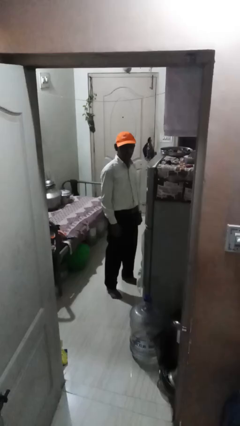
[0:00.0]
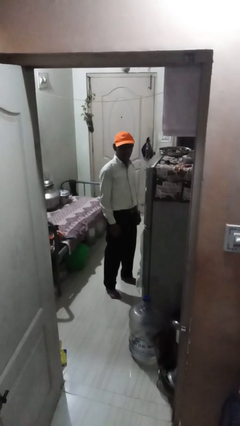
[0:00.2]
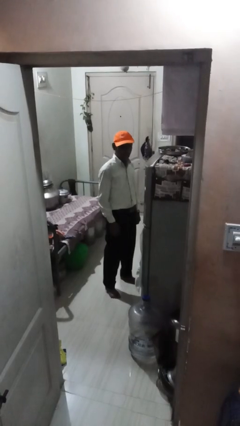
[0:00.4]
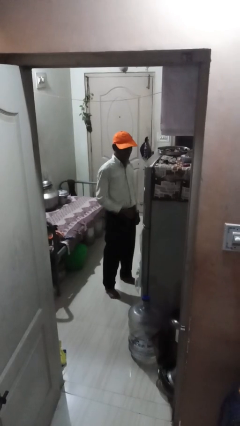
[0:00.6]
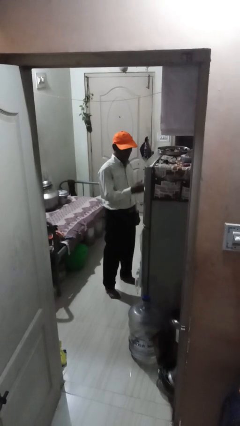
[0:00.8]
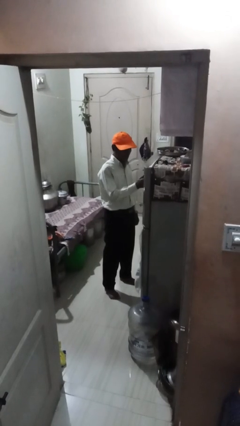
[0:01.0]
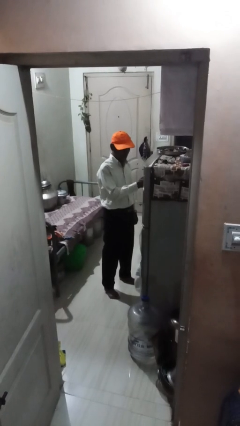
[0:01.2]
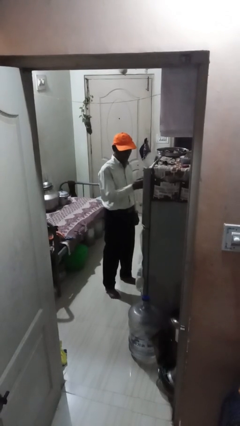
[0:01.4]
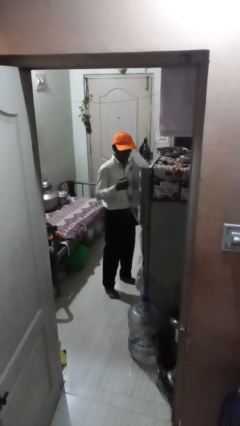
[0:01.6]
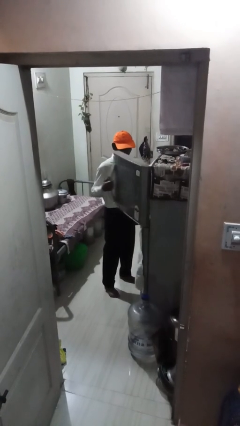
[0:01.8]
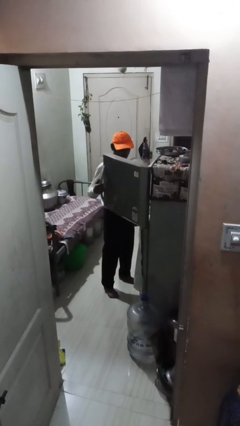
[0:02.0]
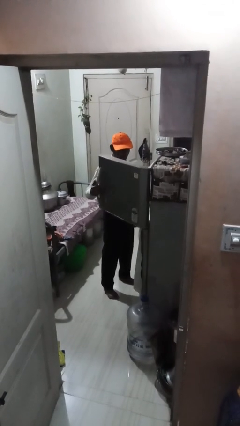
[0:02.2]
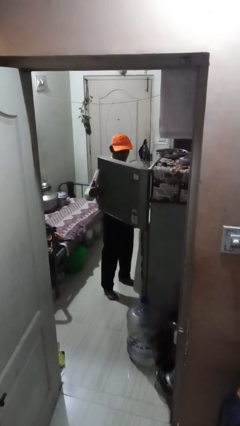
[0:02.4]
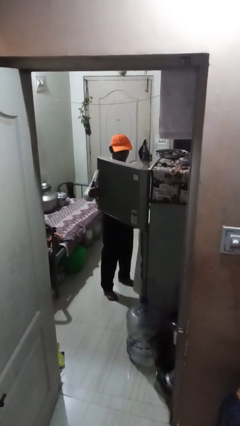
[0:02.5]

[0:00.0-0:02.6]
person opens clothes washer

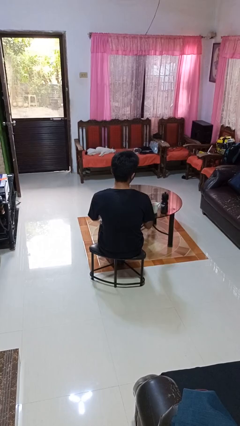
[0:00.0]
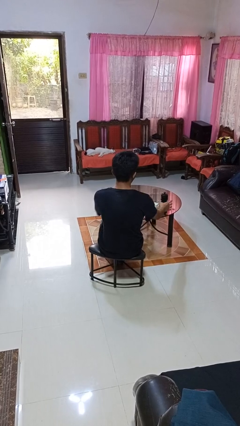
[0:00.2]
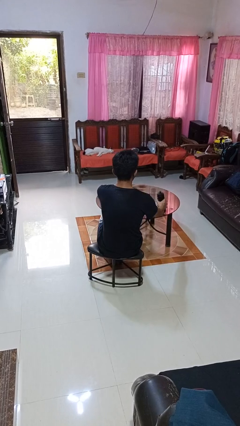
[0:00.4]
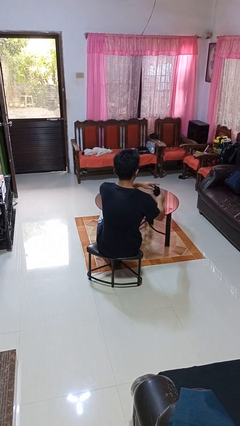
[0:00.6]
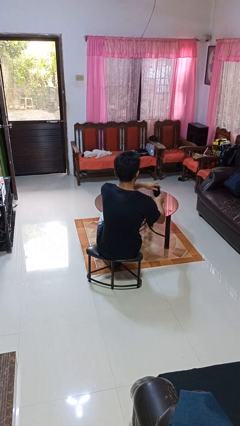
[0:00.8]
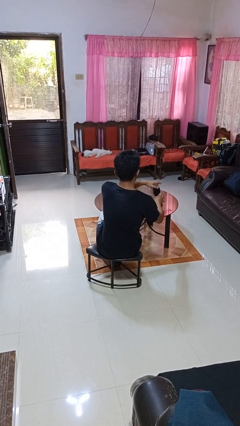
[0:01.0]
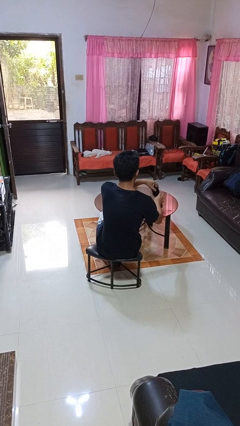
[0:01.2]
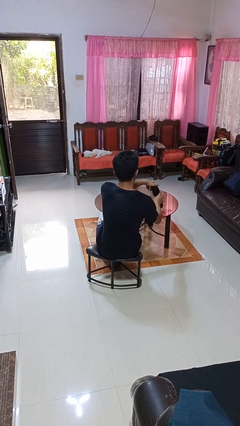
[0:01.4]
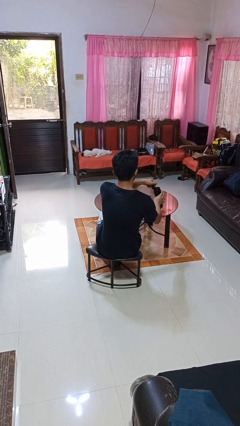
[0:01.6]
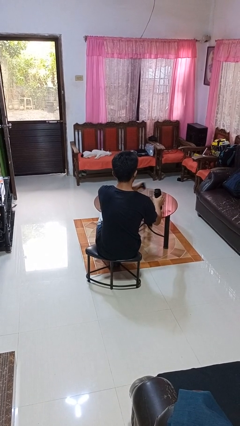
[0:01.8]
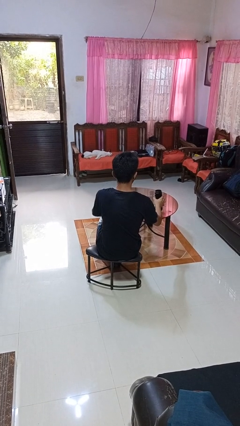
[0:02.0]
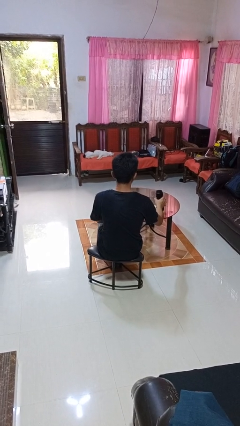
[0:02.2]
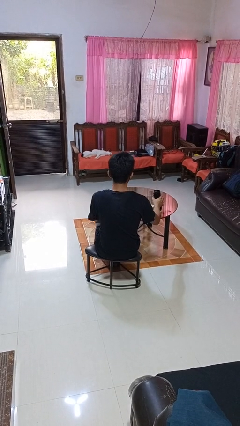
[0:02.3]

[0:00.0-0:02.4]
person unscrews lid from bottle

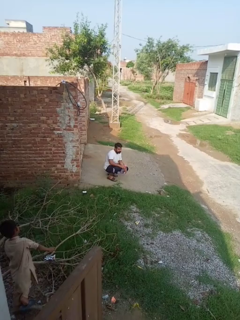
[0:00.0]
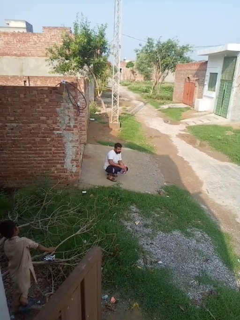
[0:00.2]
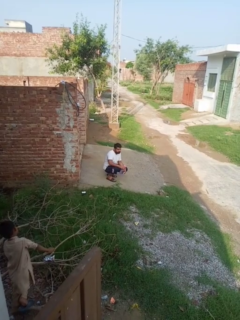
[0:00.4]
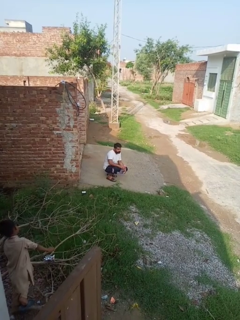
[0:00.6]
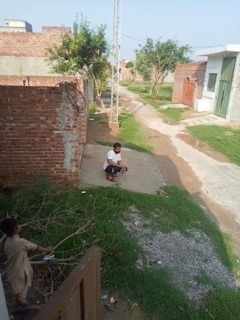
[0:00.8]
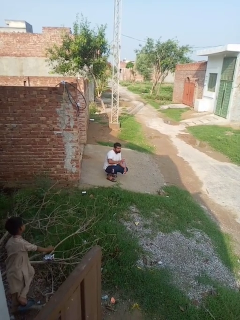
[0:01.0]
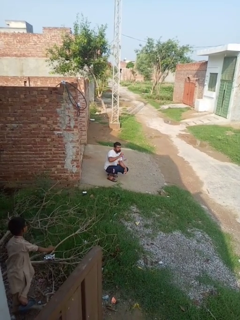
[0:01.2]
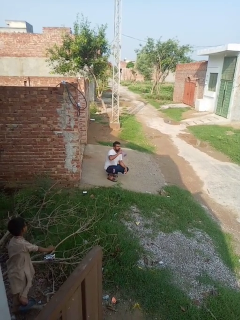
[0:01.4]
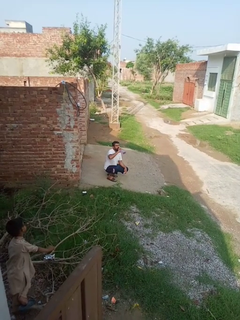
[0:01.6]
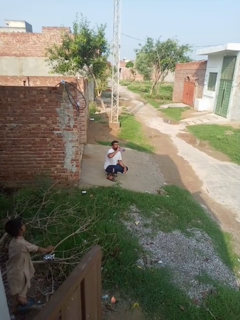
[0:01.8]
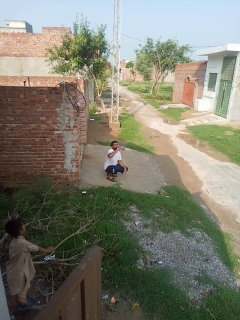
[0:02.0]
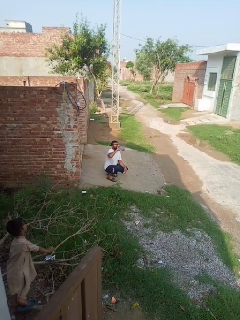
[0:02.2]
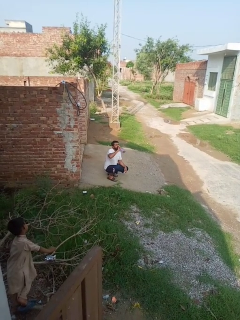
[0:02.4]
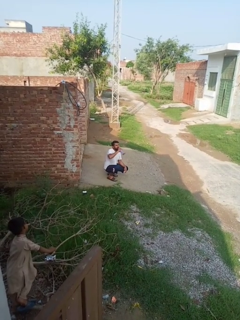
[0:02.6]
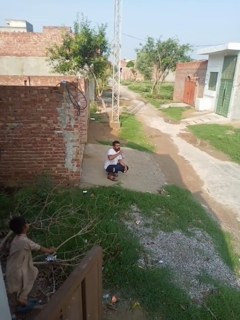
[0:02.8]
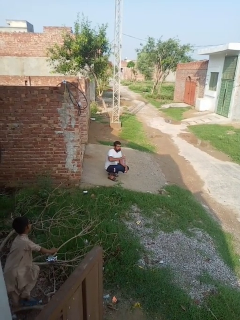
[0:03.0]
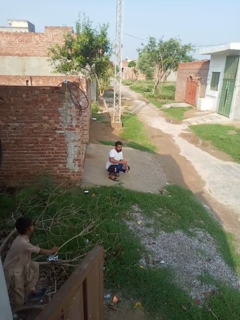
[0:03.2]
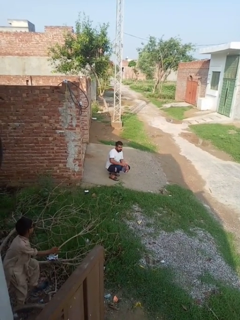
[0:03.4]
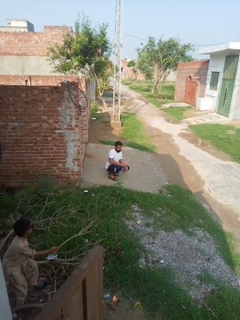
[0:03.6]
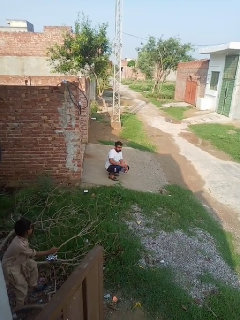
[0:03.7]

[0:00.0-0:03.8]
person drinks from bottle

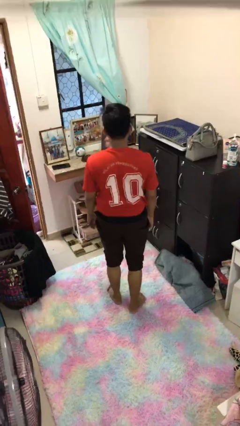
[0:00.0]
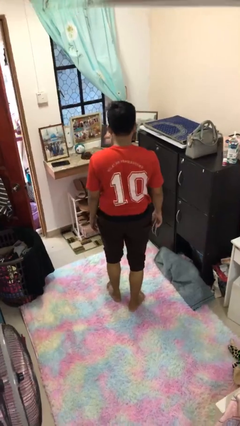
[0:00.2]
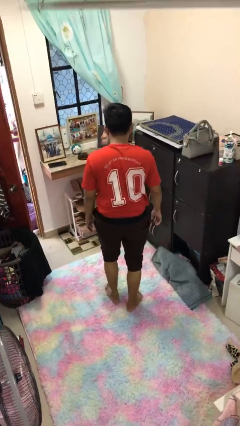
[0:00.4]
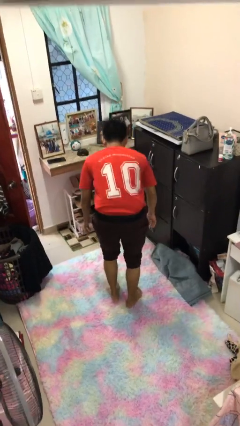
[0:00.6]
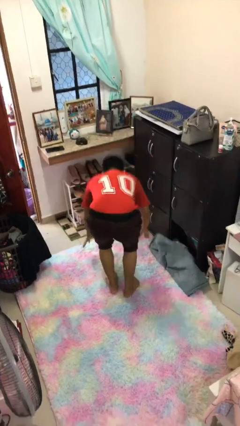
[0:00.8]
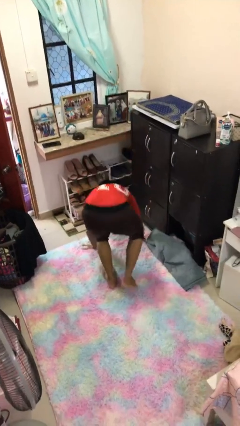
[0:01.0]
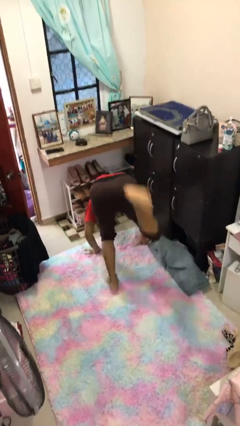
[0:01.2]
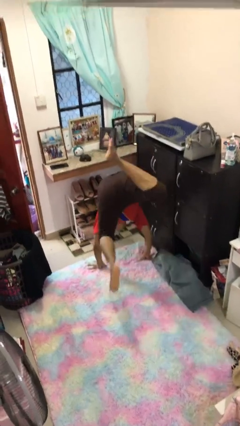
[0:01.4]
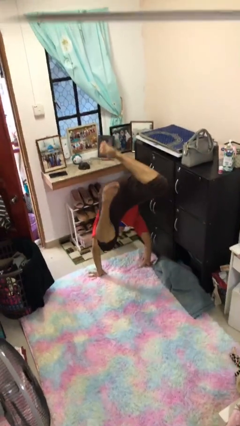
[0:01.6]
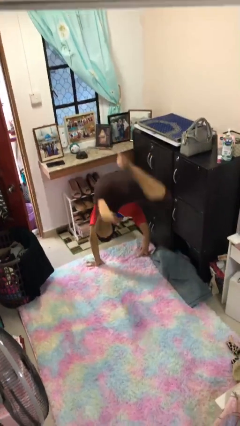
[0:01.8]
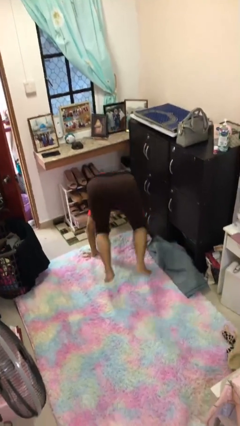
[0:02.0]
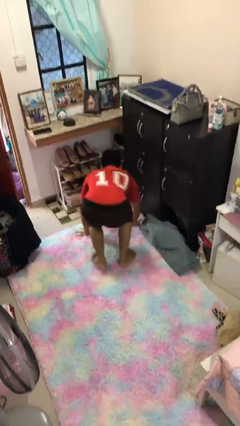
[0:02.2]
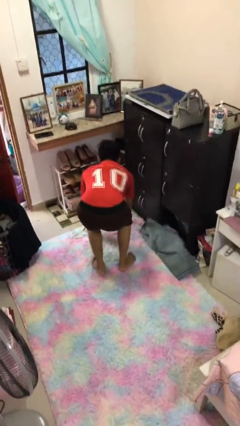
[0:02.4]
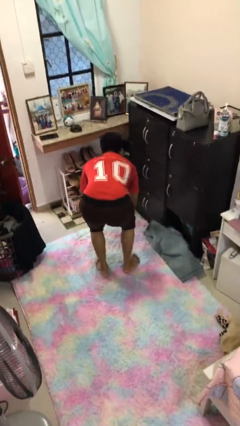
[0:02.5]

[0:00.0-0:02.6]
person handstand

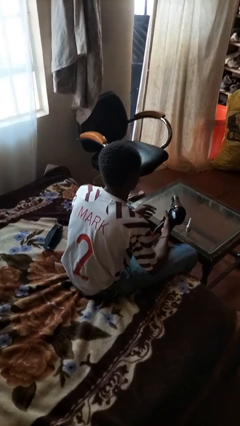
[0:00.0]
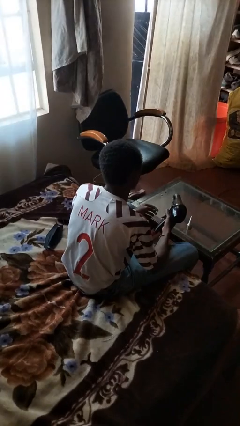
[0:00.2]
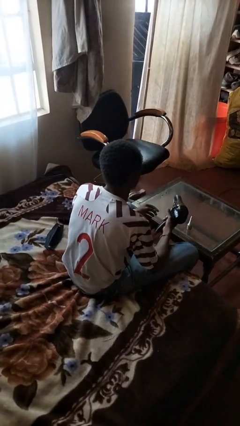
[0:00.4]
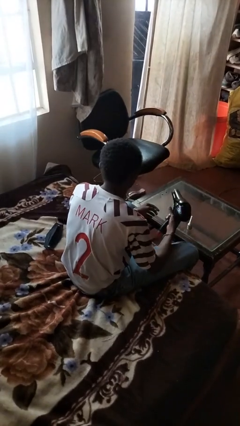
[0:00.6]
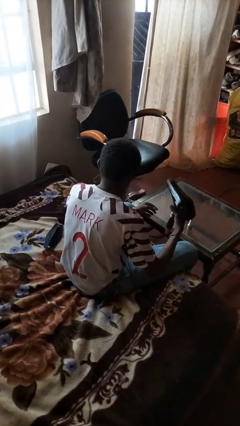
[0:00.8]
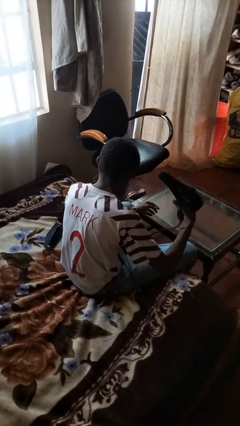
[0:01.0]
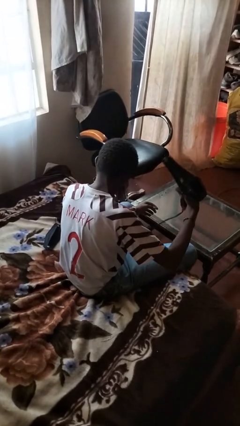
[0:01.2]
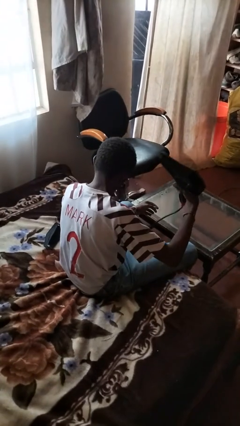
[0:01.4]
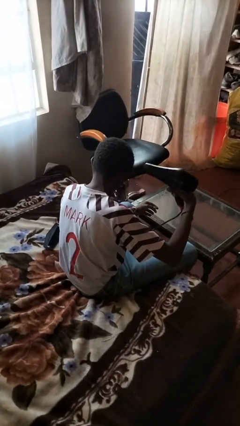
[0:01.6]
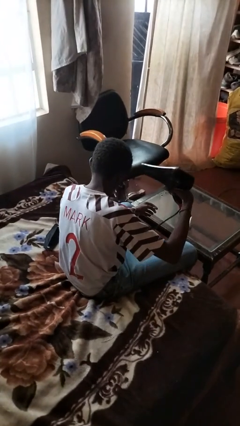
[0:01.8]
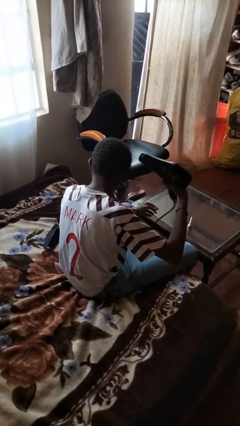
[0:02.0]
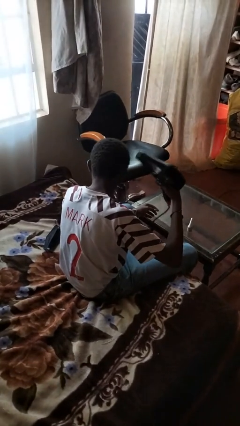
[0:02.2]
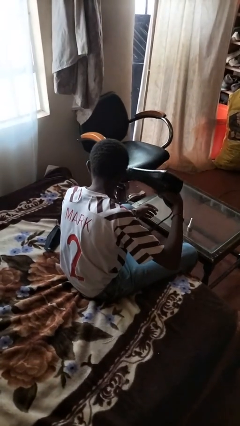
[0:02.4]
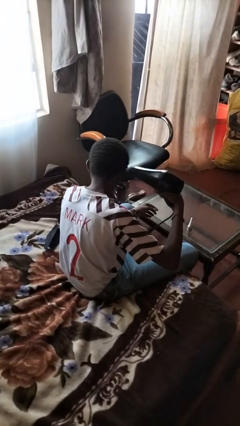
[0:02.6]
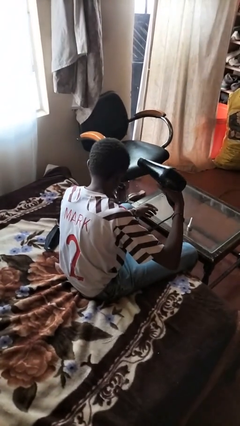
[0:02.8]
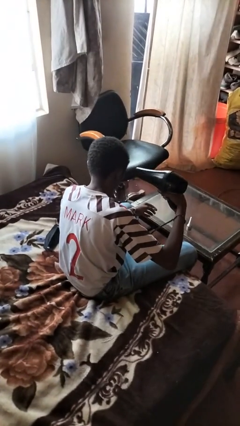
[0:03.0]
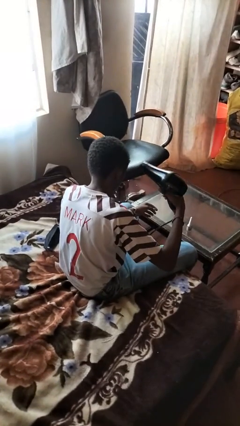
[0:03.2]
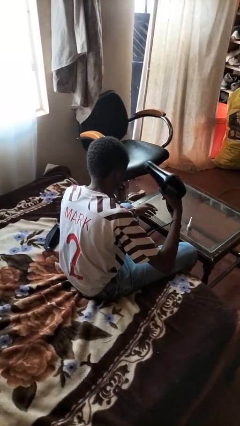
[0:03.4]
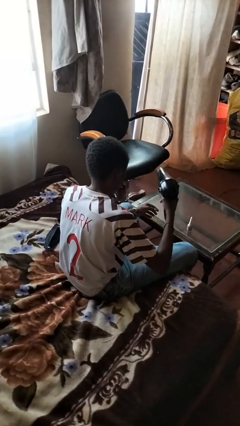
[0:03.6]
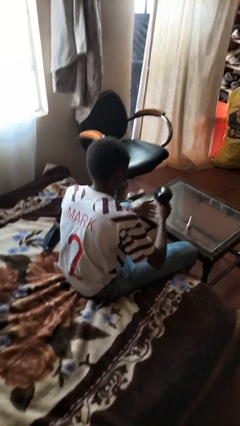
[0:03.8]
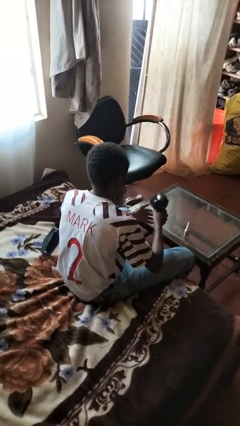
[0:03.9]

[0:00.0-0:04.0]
person dries hair with hairdryer

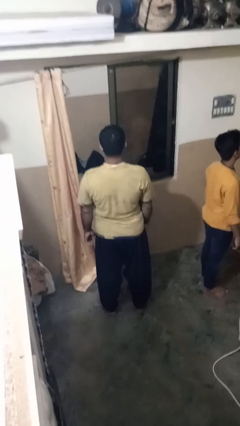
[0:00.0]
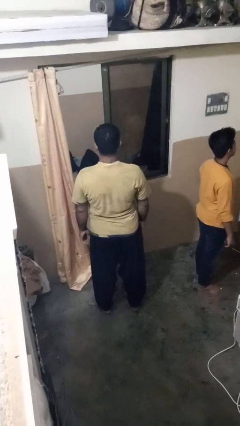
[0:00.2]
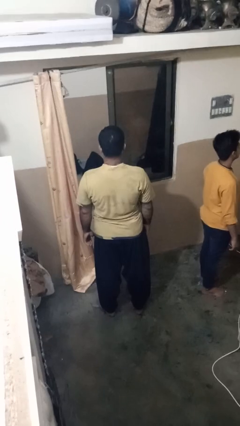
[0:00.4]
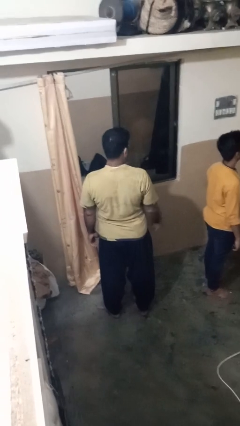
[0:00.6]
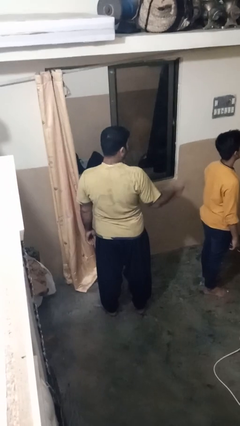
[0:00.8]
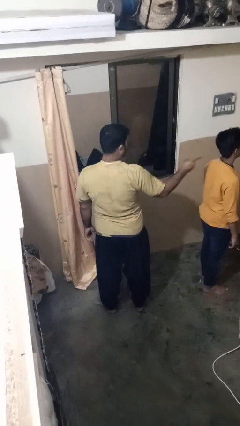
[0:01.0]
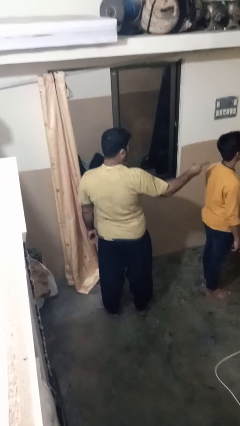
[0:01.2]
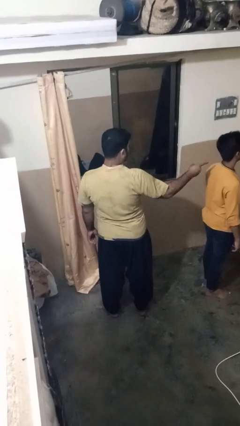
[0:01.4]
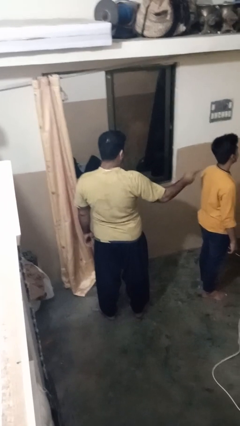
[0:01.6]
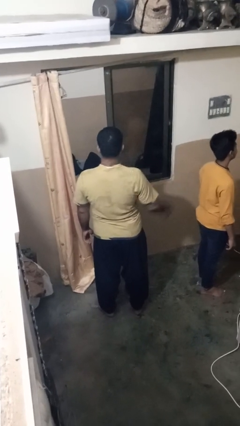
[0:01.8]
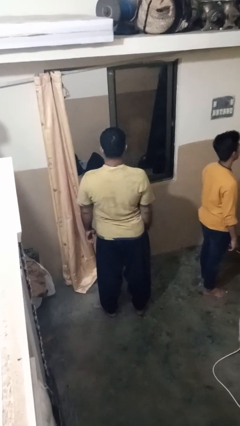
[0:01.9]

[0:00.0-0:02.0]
person points at person

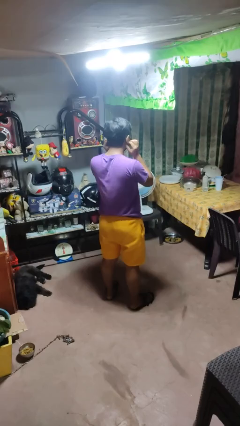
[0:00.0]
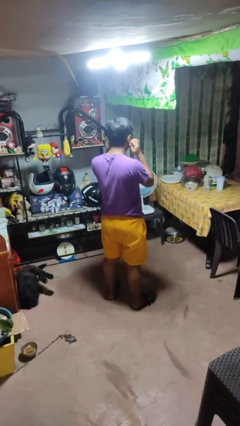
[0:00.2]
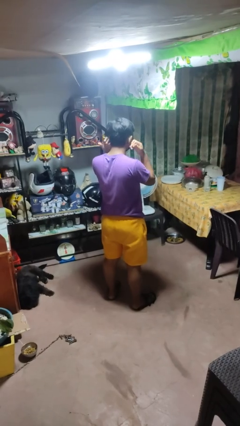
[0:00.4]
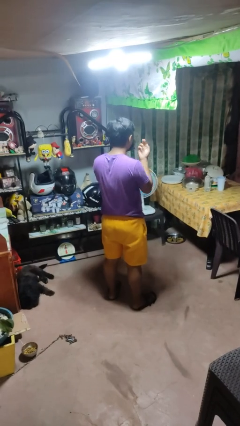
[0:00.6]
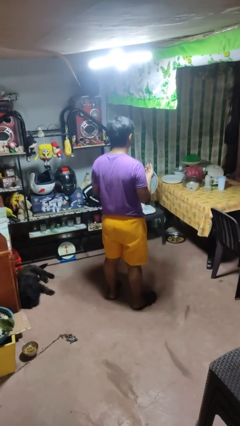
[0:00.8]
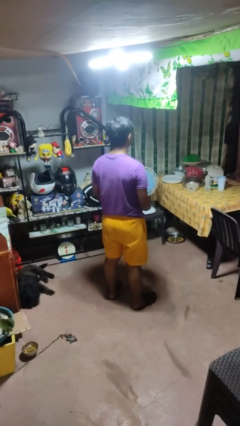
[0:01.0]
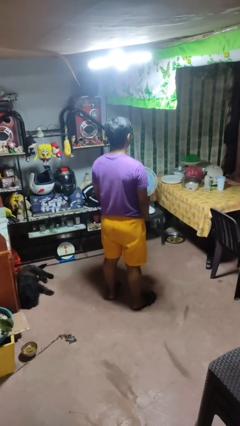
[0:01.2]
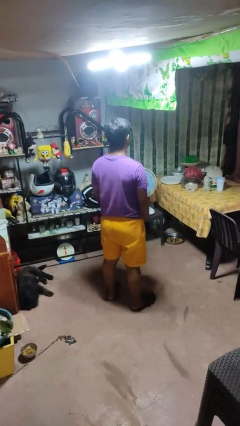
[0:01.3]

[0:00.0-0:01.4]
person takes off facemask
